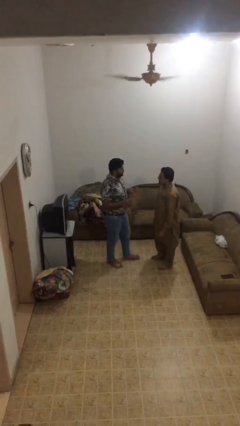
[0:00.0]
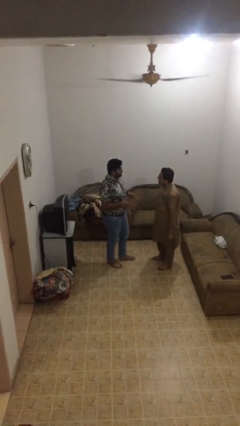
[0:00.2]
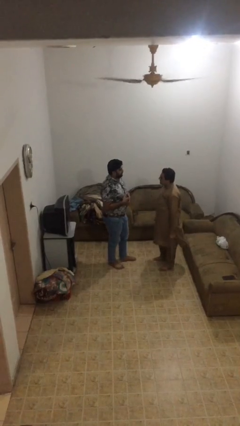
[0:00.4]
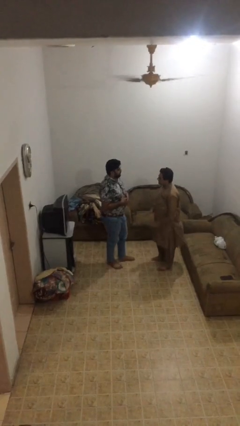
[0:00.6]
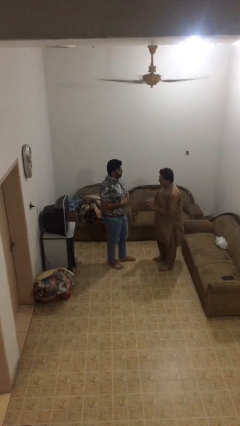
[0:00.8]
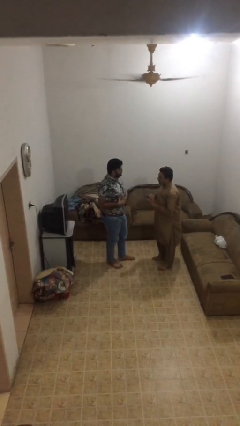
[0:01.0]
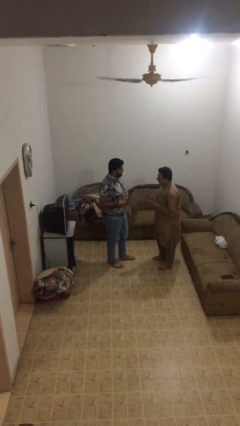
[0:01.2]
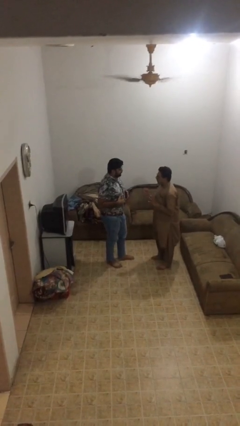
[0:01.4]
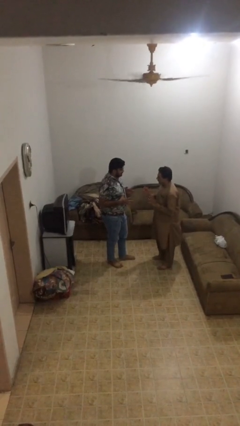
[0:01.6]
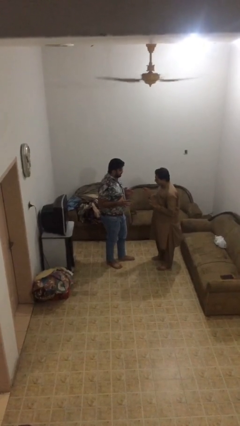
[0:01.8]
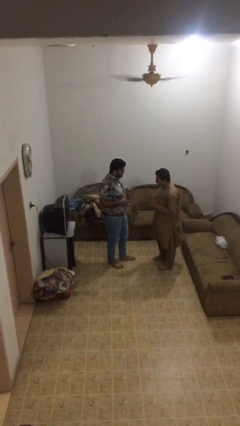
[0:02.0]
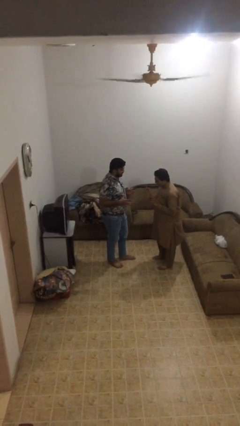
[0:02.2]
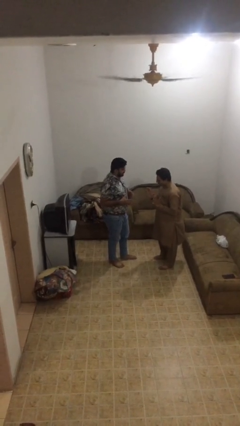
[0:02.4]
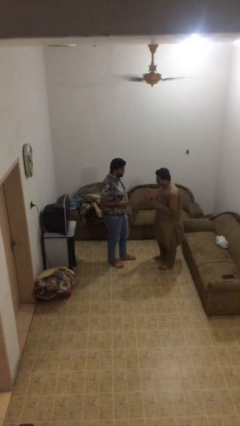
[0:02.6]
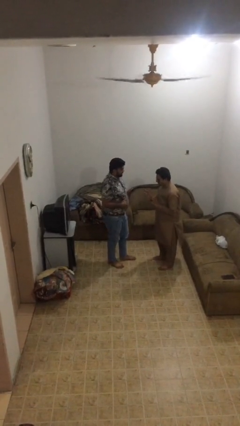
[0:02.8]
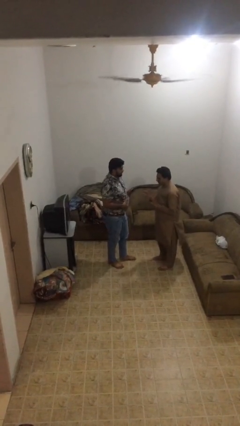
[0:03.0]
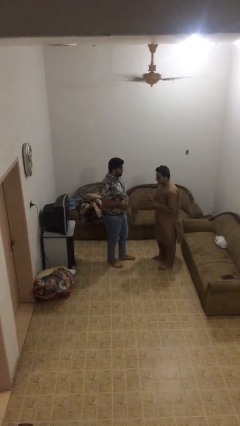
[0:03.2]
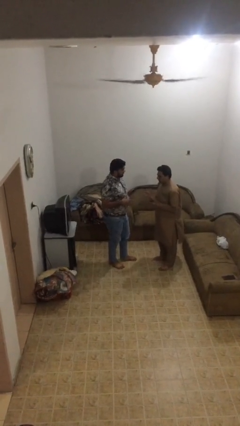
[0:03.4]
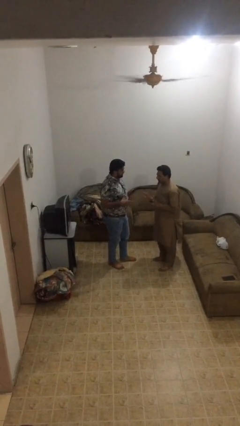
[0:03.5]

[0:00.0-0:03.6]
person talks to person

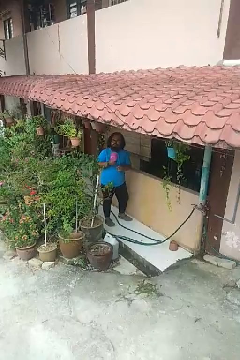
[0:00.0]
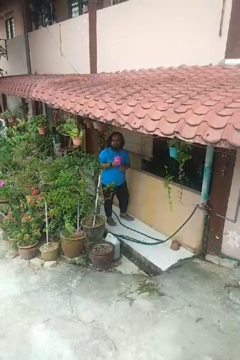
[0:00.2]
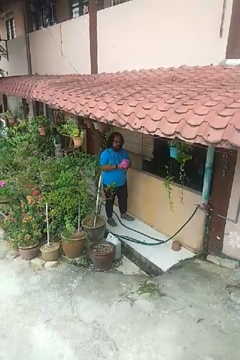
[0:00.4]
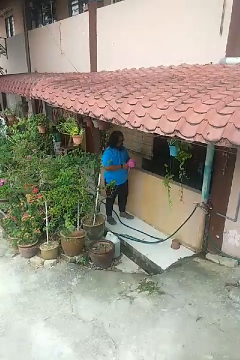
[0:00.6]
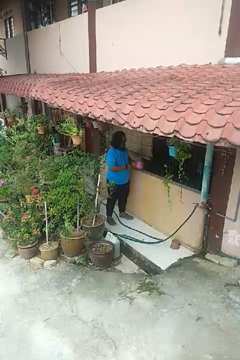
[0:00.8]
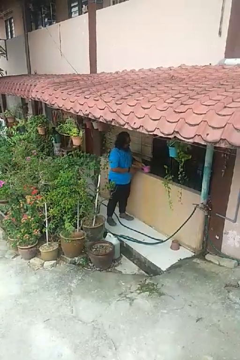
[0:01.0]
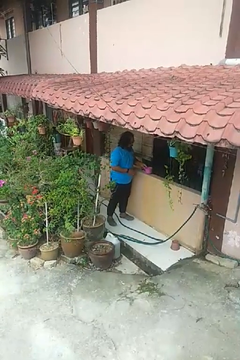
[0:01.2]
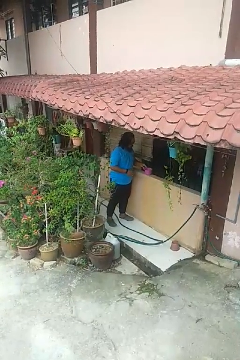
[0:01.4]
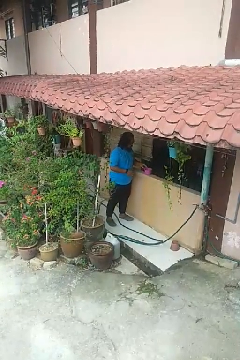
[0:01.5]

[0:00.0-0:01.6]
person puts down object on countertop

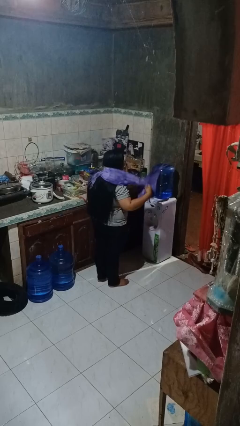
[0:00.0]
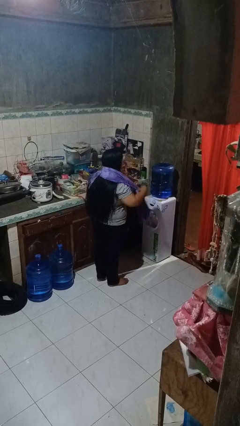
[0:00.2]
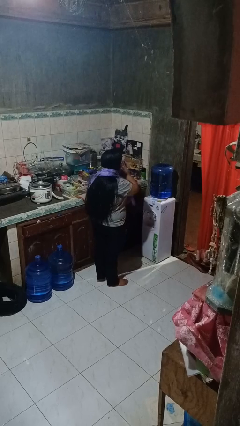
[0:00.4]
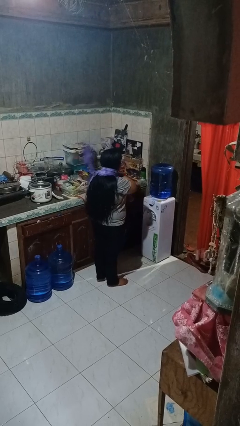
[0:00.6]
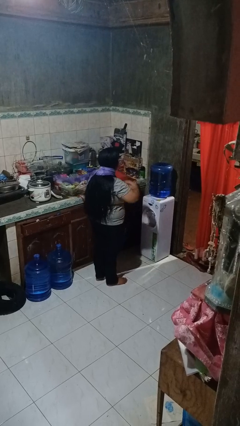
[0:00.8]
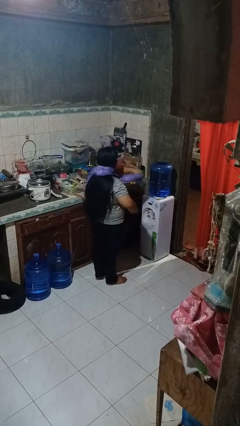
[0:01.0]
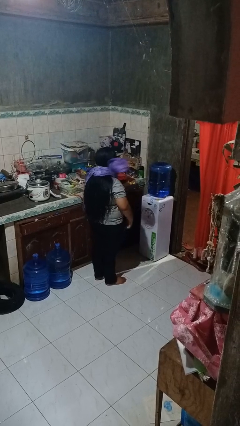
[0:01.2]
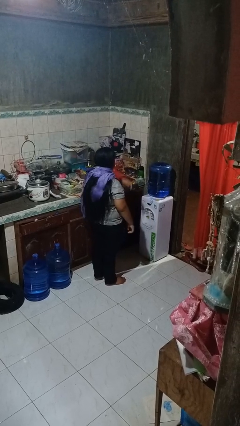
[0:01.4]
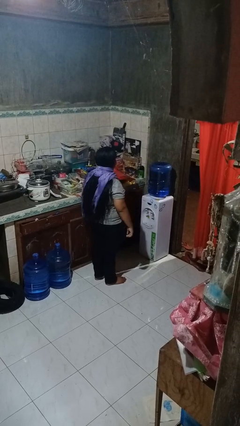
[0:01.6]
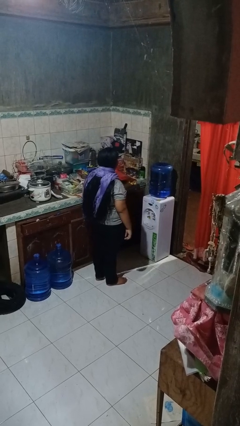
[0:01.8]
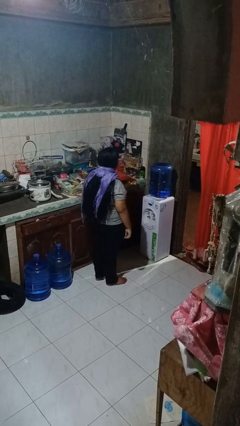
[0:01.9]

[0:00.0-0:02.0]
person puts on scarf

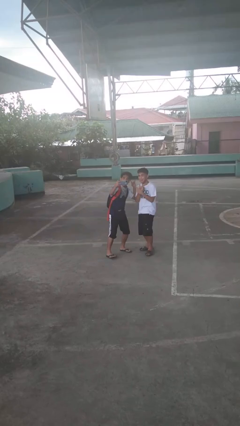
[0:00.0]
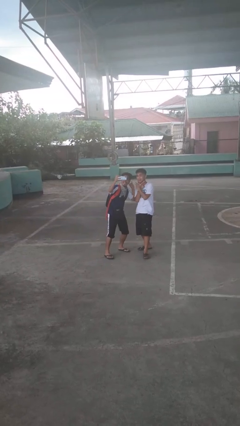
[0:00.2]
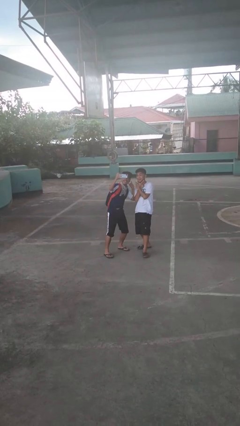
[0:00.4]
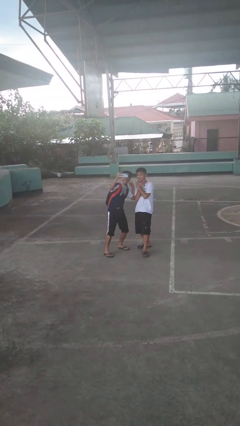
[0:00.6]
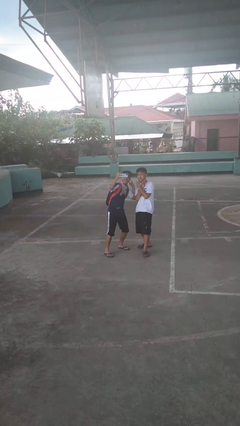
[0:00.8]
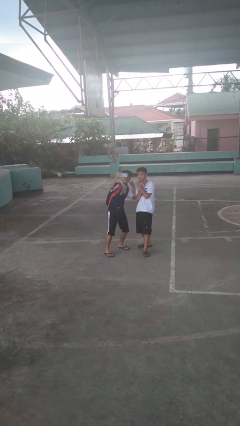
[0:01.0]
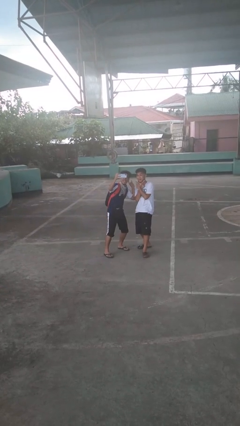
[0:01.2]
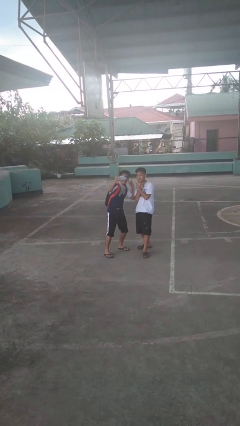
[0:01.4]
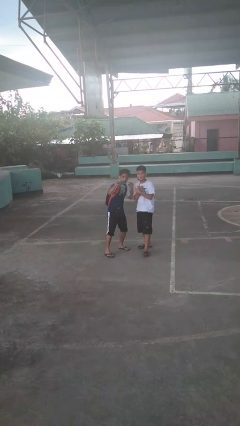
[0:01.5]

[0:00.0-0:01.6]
person takes selfie with person

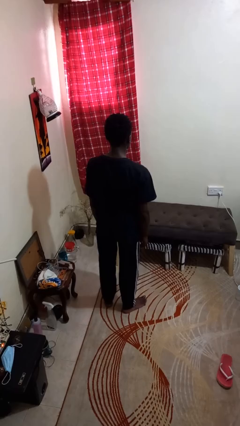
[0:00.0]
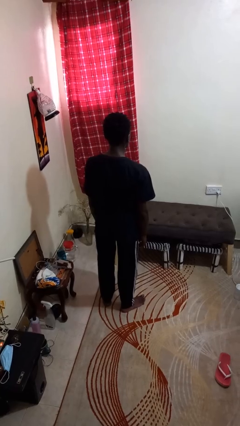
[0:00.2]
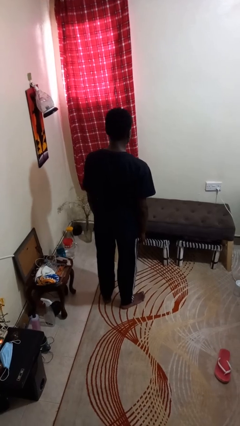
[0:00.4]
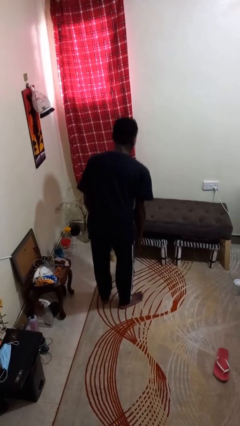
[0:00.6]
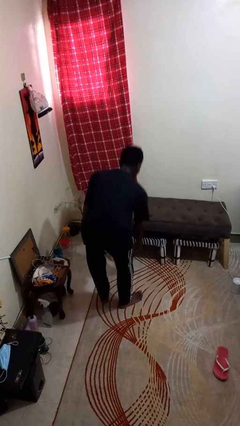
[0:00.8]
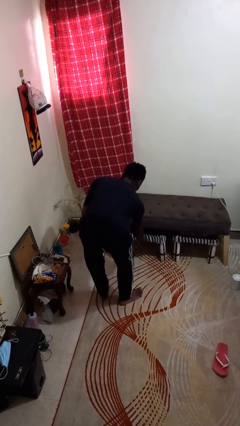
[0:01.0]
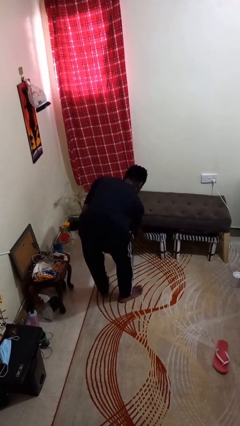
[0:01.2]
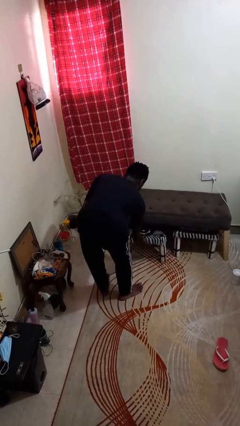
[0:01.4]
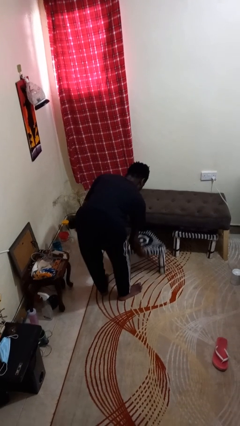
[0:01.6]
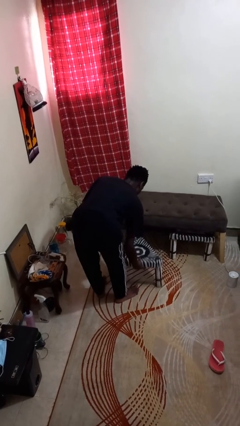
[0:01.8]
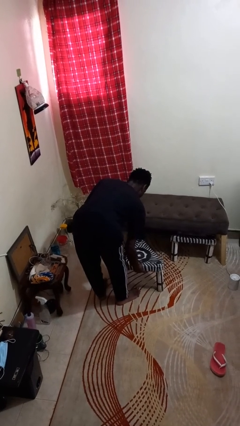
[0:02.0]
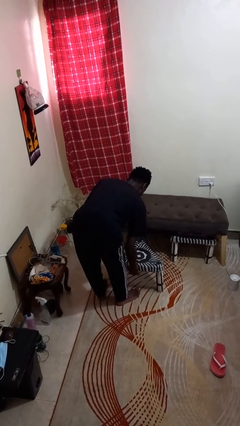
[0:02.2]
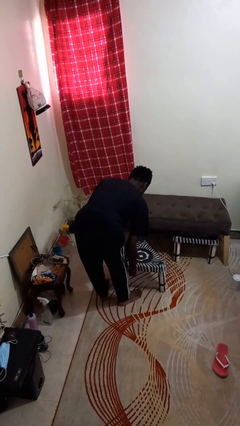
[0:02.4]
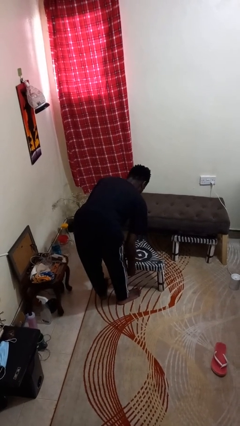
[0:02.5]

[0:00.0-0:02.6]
person pulls out chair

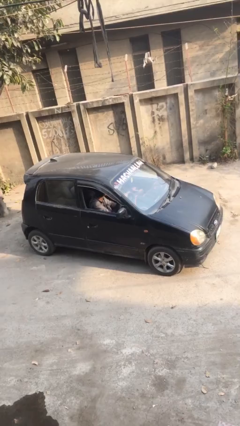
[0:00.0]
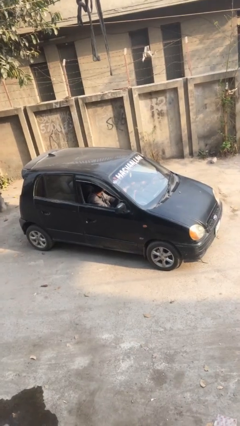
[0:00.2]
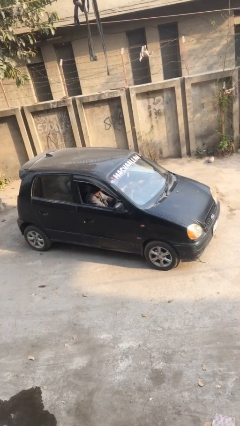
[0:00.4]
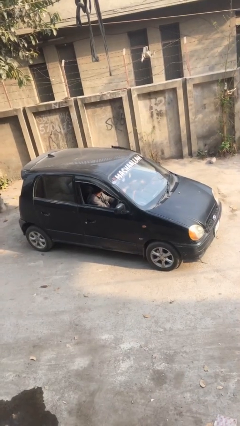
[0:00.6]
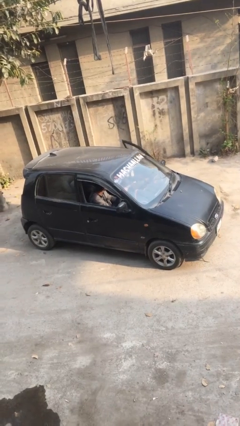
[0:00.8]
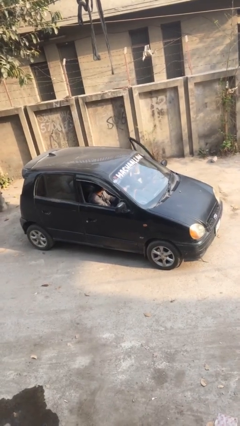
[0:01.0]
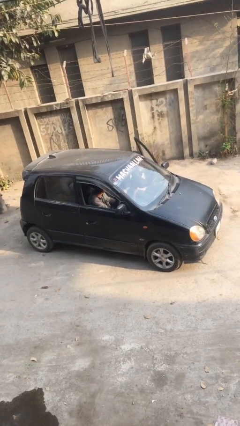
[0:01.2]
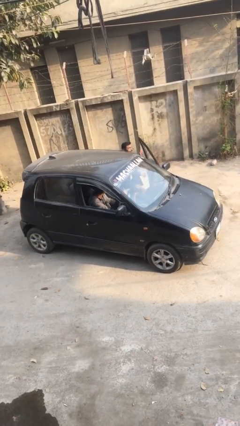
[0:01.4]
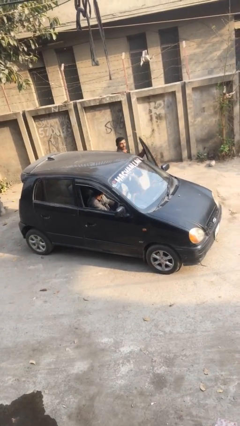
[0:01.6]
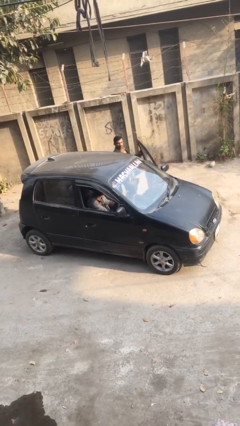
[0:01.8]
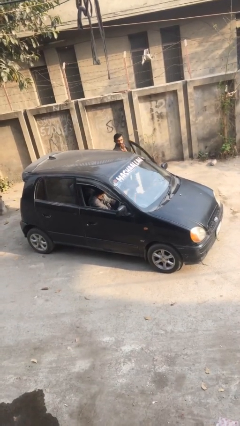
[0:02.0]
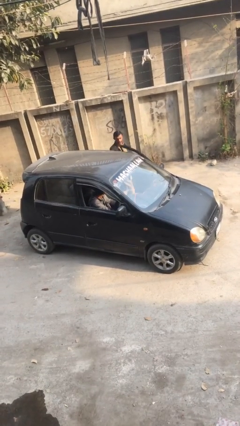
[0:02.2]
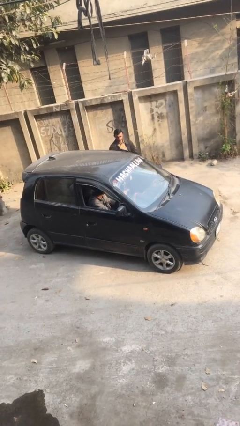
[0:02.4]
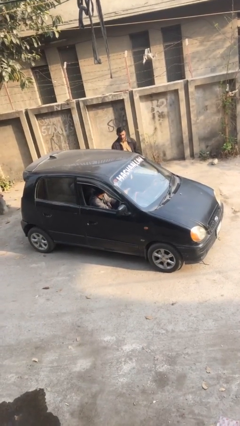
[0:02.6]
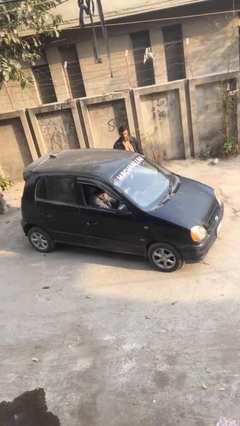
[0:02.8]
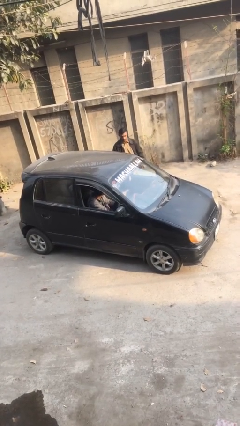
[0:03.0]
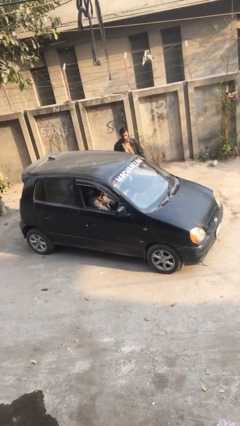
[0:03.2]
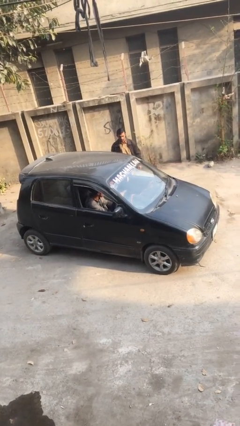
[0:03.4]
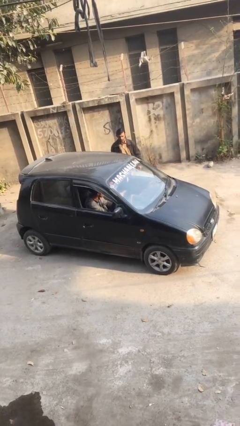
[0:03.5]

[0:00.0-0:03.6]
car drops off person

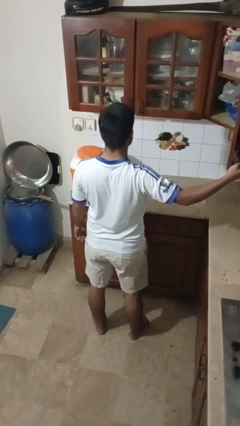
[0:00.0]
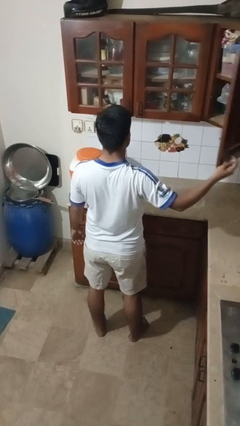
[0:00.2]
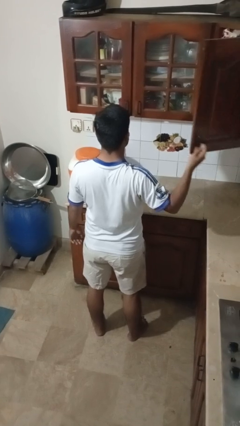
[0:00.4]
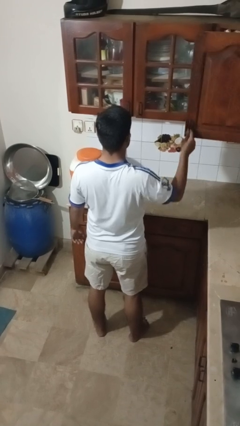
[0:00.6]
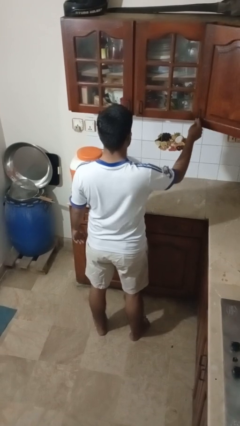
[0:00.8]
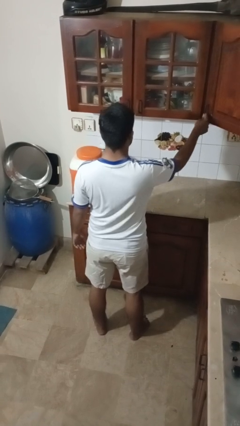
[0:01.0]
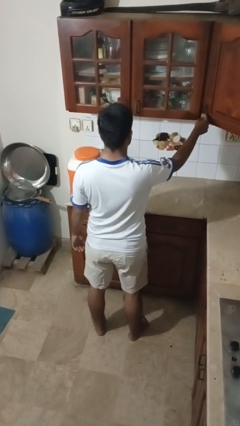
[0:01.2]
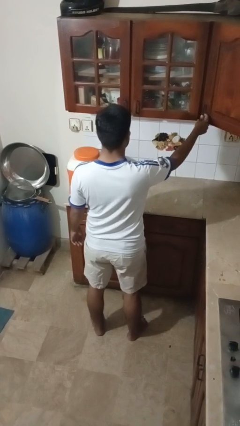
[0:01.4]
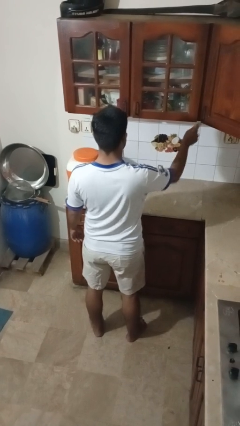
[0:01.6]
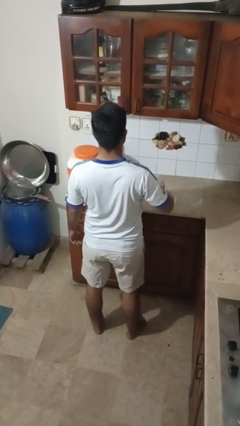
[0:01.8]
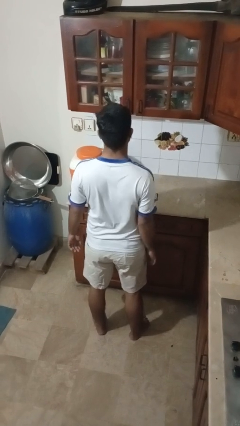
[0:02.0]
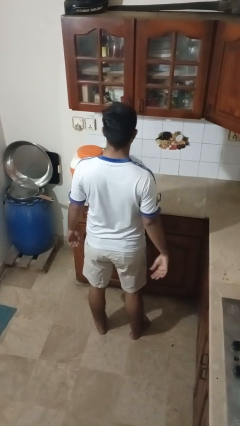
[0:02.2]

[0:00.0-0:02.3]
person closes cabinet
